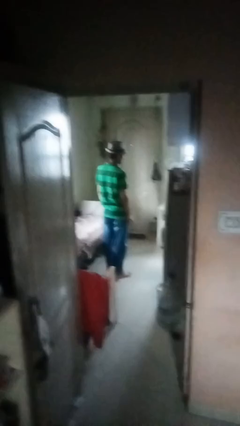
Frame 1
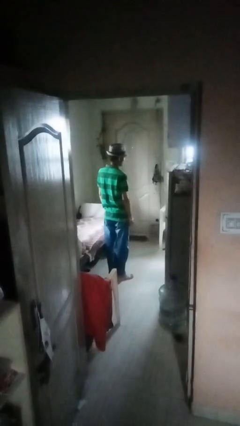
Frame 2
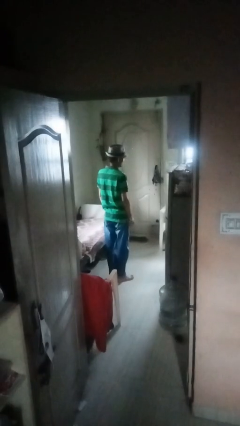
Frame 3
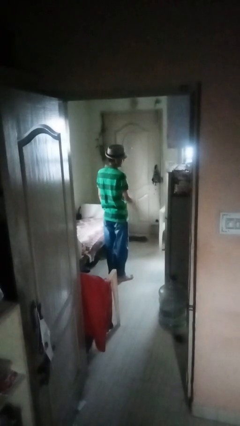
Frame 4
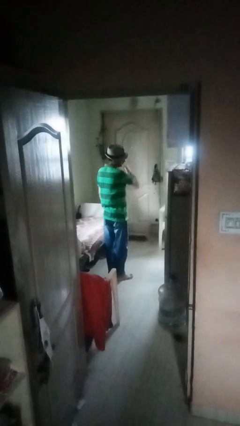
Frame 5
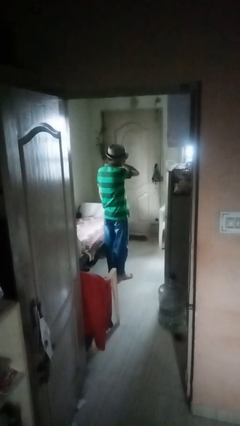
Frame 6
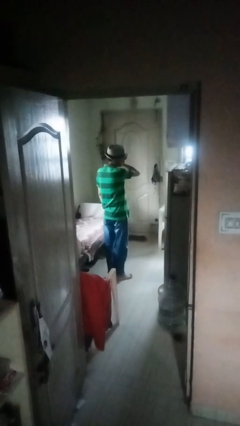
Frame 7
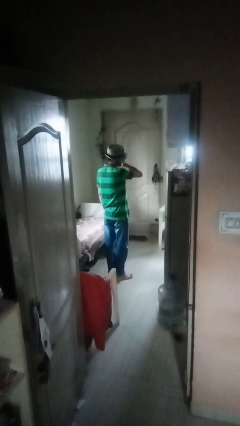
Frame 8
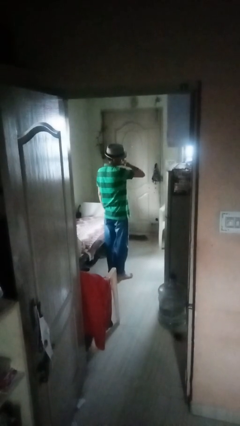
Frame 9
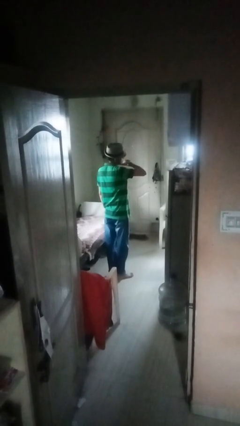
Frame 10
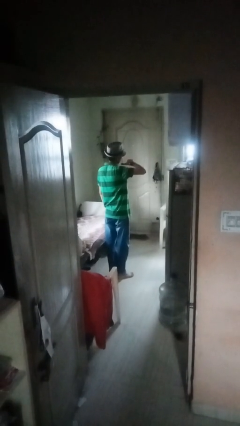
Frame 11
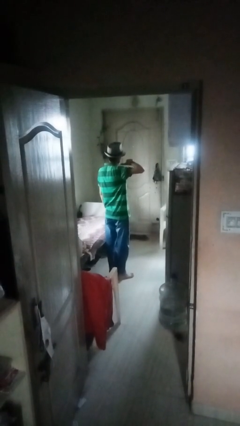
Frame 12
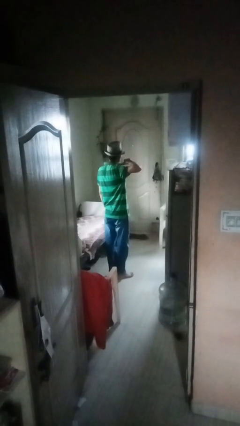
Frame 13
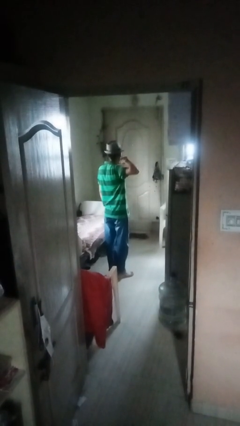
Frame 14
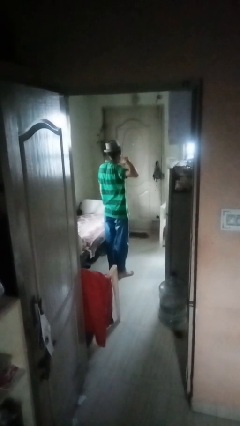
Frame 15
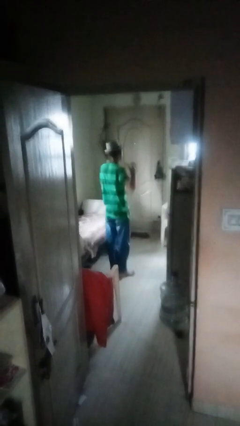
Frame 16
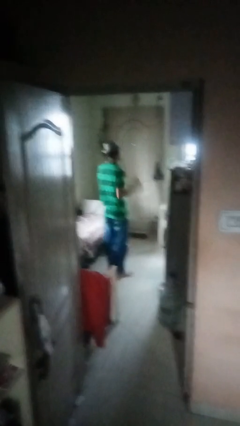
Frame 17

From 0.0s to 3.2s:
person gestures cut

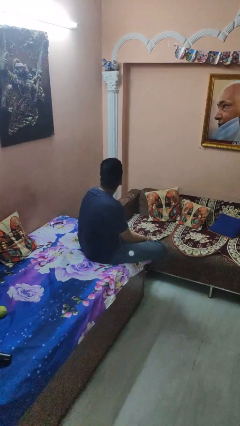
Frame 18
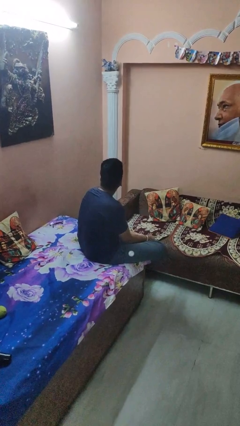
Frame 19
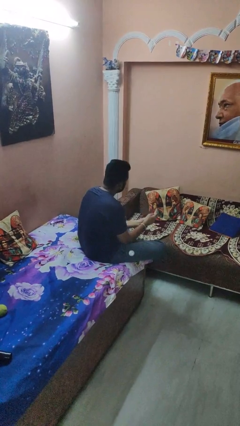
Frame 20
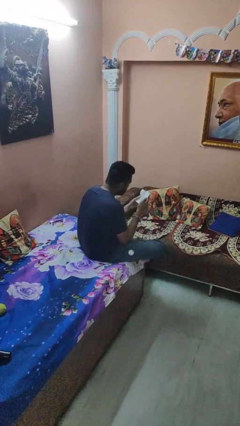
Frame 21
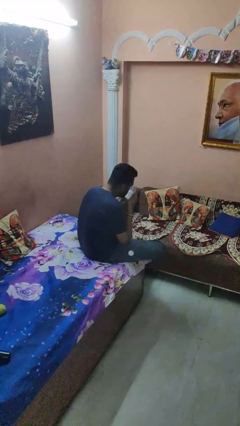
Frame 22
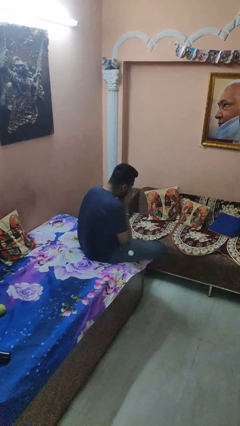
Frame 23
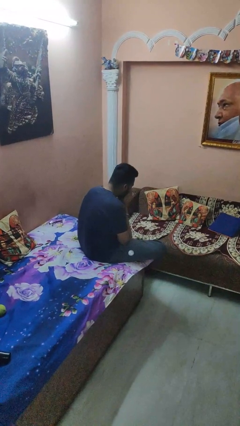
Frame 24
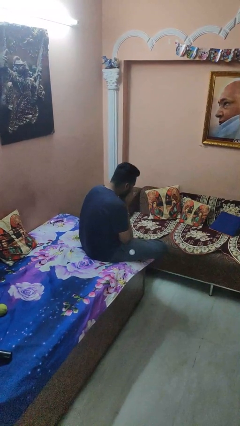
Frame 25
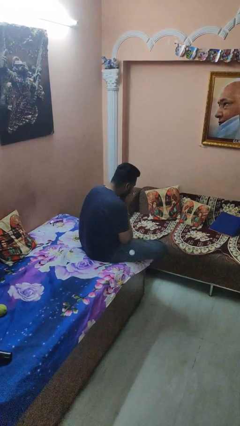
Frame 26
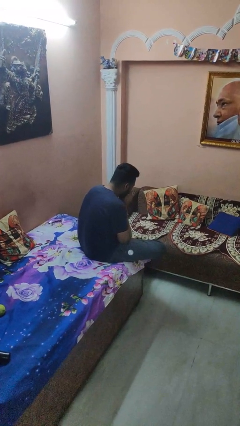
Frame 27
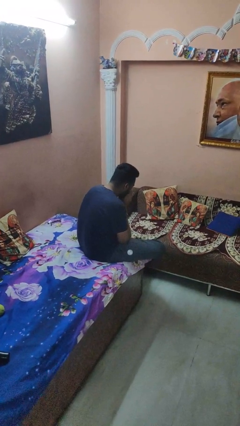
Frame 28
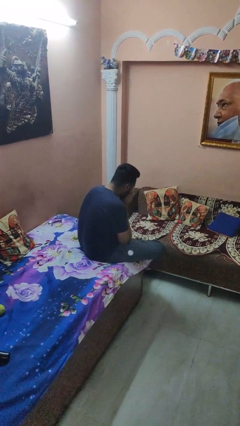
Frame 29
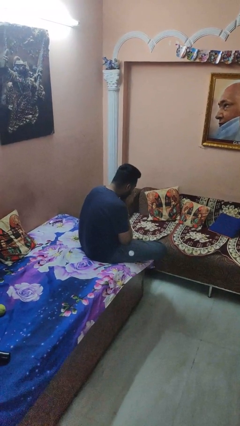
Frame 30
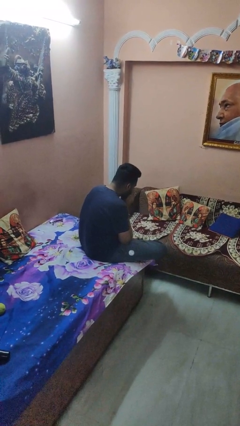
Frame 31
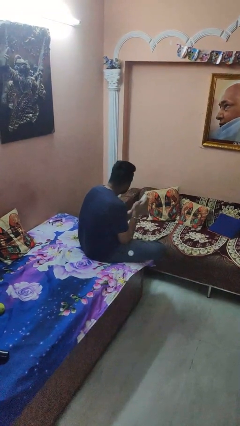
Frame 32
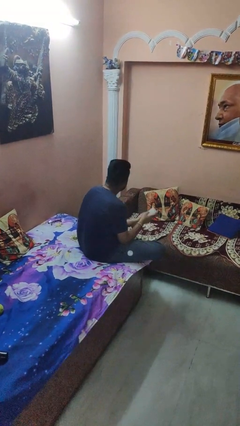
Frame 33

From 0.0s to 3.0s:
person blows nose

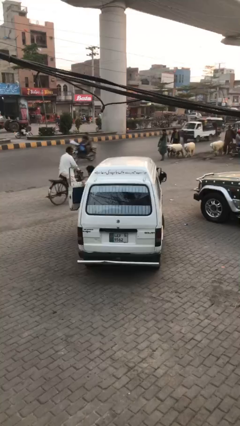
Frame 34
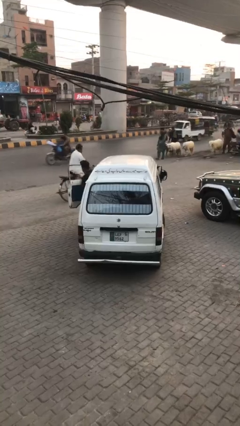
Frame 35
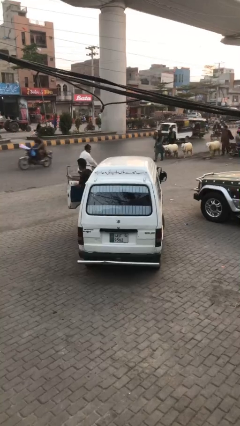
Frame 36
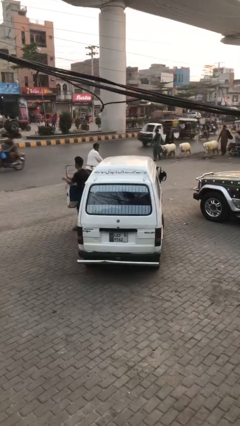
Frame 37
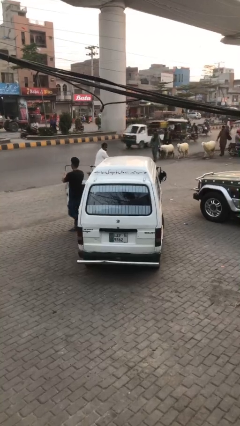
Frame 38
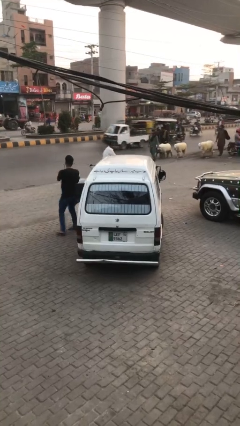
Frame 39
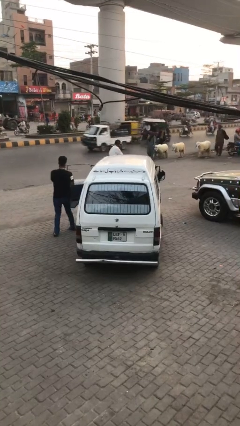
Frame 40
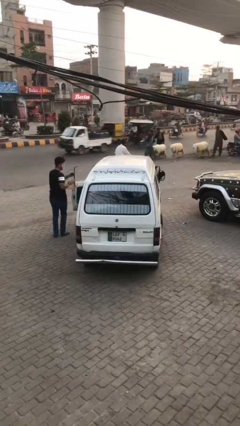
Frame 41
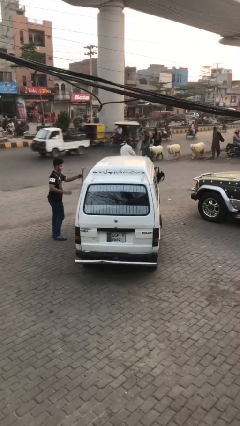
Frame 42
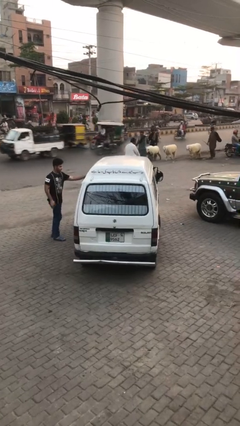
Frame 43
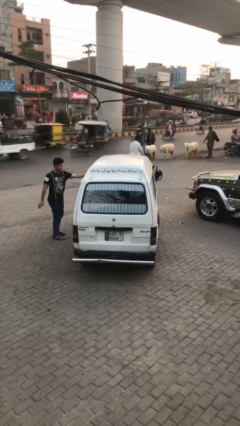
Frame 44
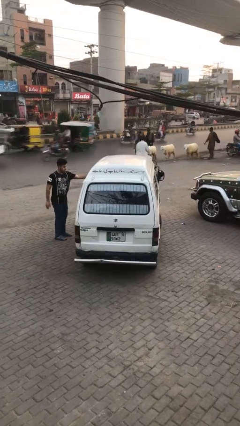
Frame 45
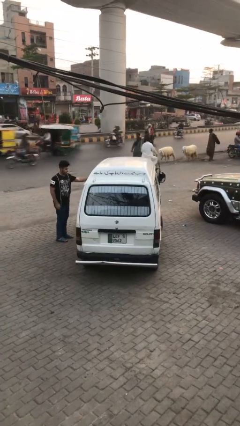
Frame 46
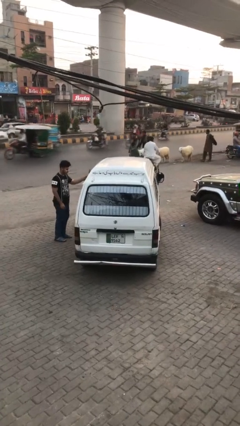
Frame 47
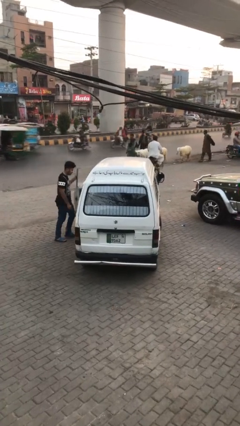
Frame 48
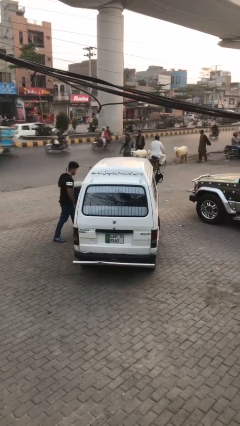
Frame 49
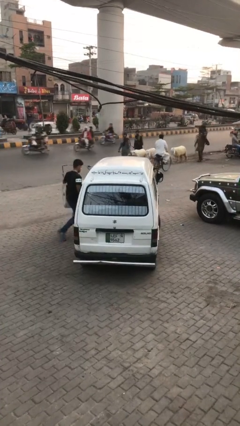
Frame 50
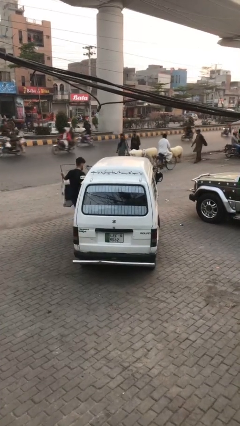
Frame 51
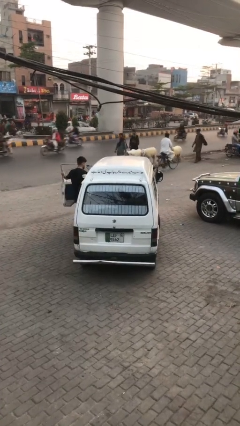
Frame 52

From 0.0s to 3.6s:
car drops off person

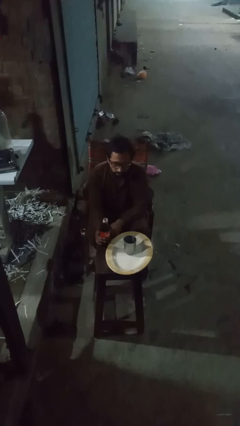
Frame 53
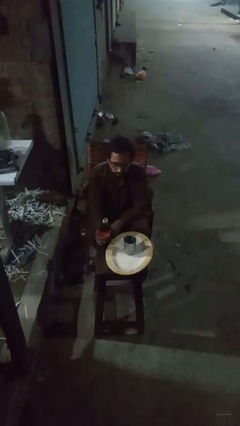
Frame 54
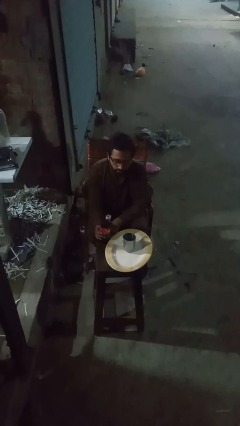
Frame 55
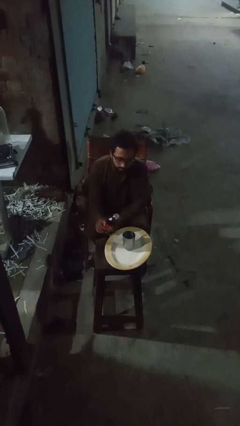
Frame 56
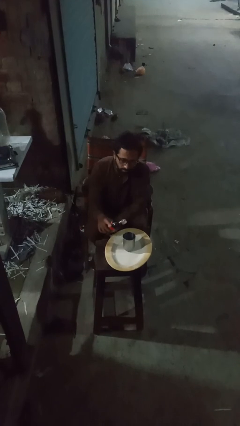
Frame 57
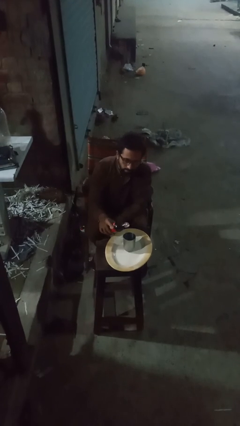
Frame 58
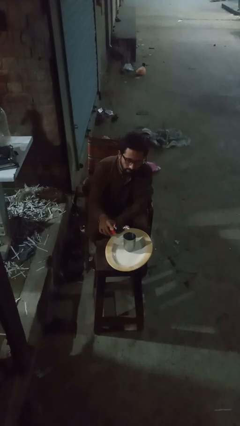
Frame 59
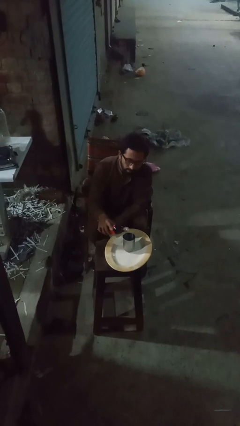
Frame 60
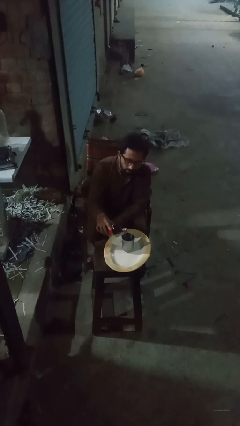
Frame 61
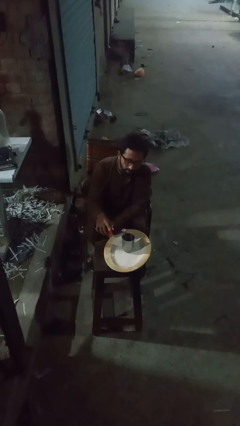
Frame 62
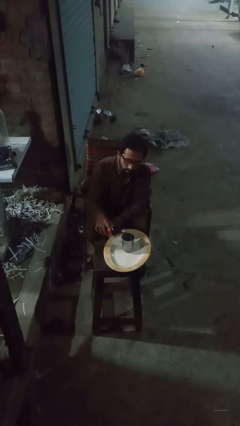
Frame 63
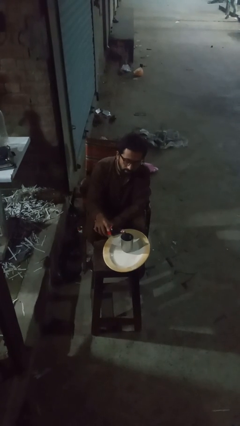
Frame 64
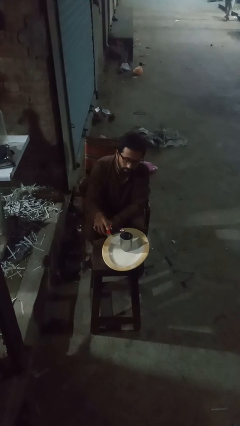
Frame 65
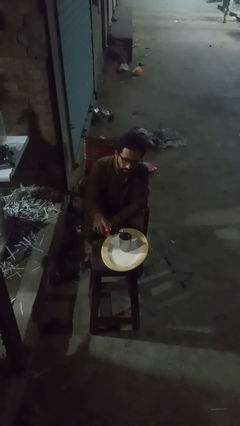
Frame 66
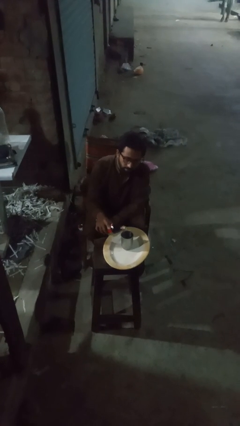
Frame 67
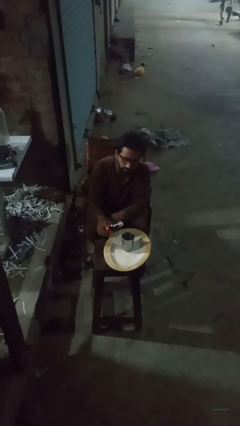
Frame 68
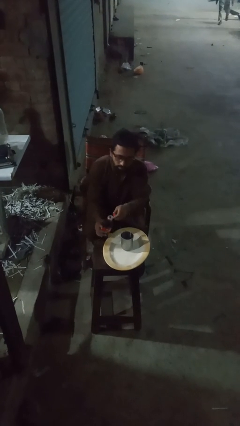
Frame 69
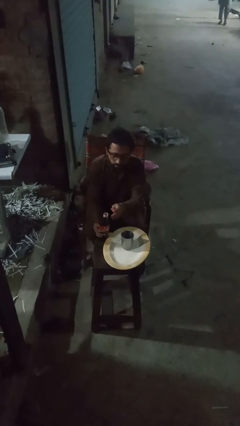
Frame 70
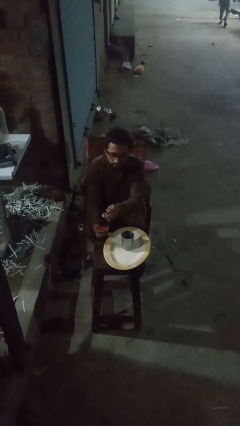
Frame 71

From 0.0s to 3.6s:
person pours liquid into cup

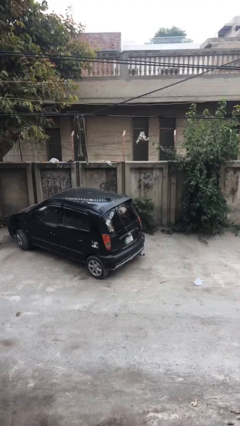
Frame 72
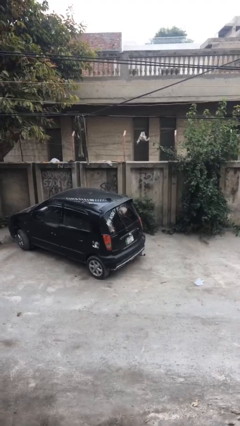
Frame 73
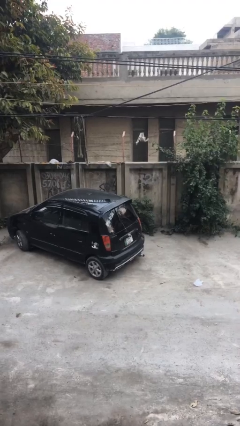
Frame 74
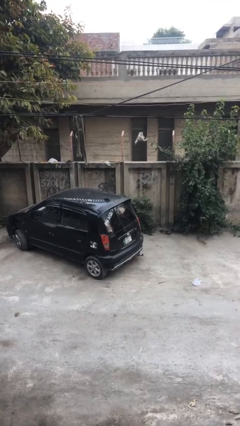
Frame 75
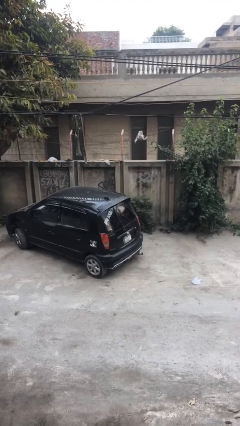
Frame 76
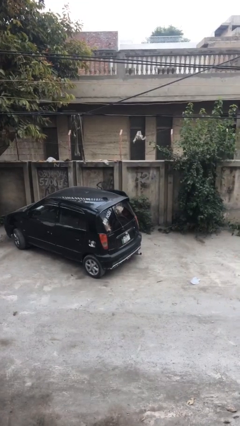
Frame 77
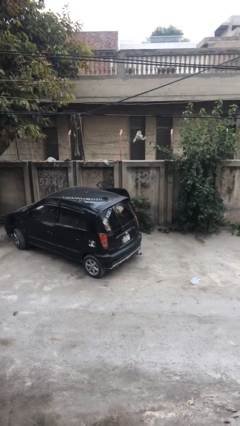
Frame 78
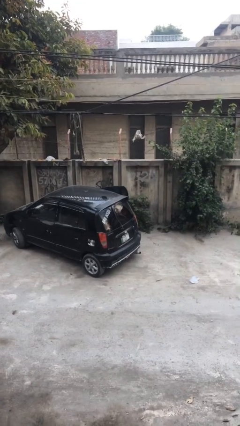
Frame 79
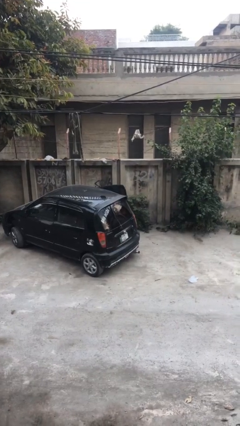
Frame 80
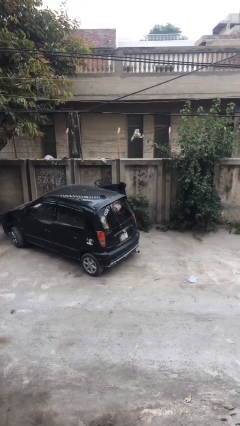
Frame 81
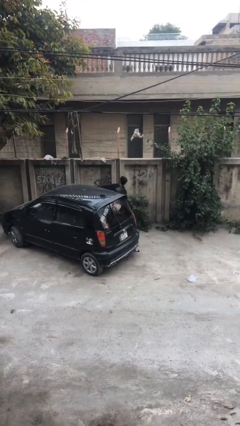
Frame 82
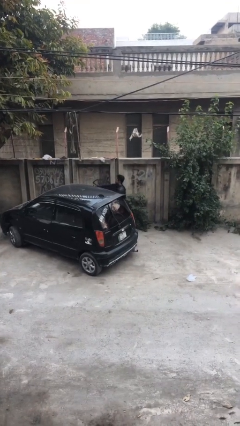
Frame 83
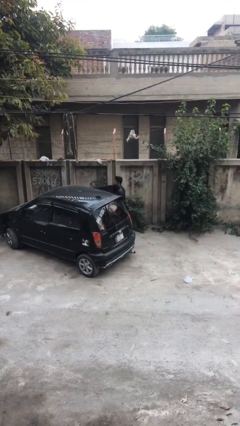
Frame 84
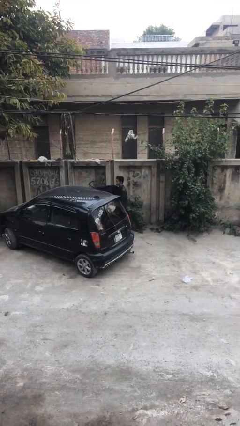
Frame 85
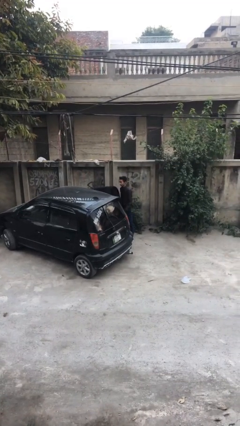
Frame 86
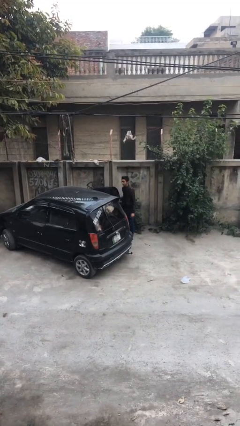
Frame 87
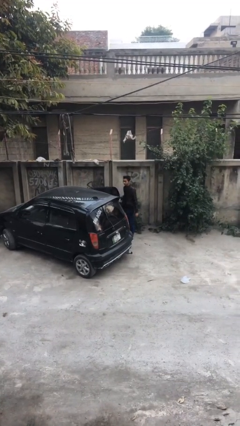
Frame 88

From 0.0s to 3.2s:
person exits car

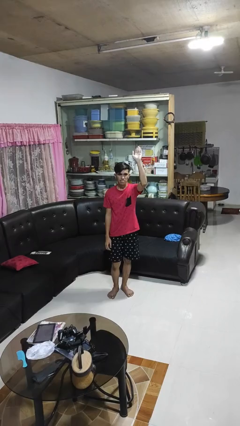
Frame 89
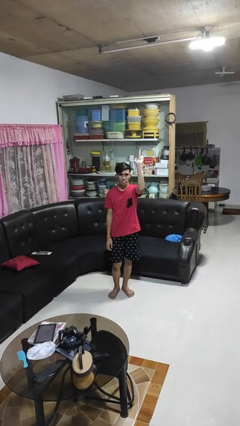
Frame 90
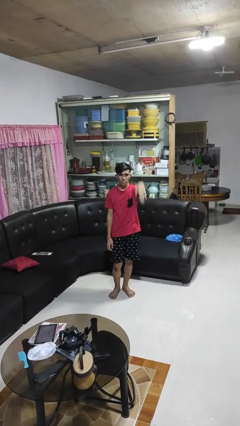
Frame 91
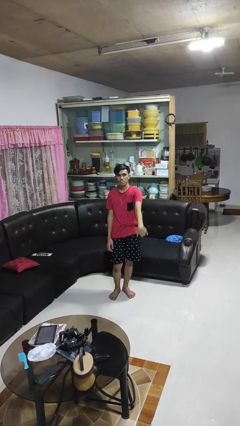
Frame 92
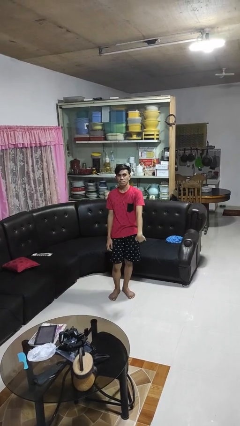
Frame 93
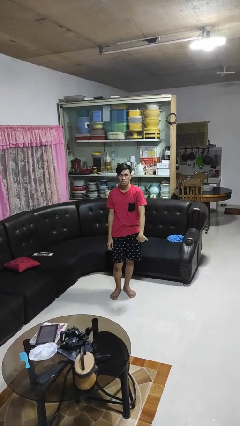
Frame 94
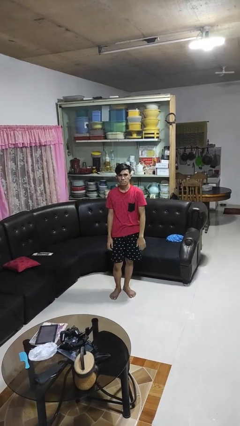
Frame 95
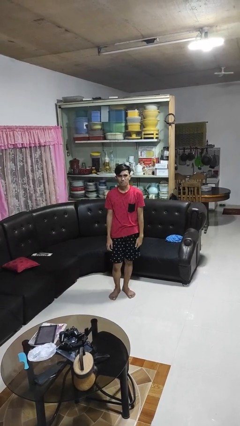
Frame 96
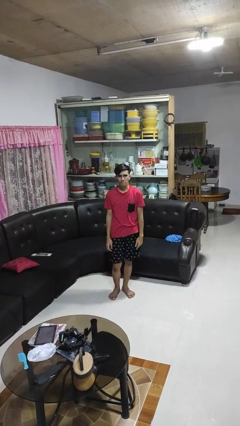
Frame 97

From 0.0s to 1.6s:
person gestures swipe down
